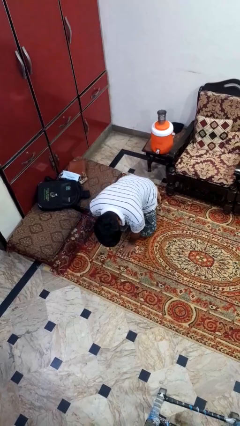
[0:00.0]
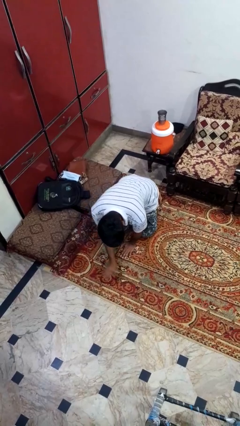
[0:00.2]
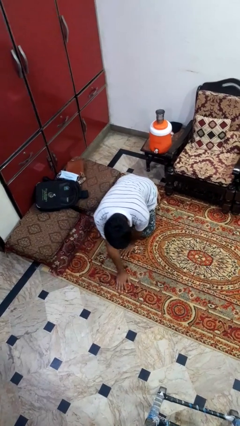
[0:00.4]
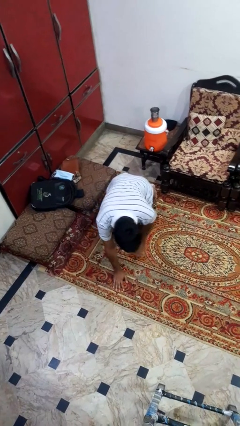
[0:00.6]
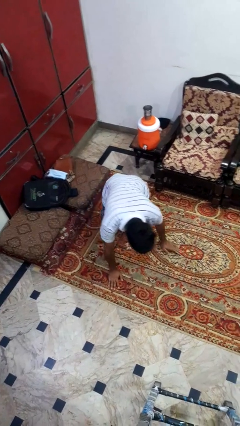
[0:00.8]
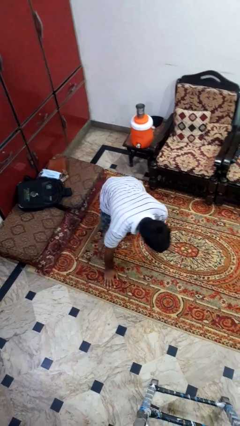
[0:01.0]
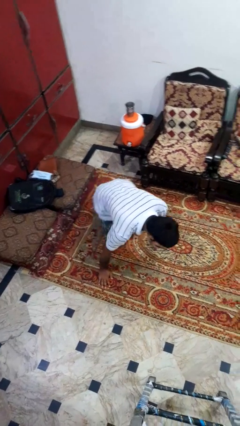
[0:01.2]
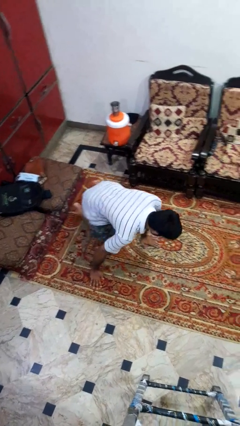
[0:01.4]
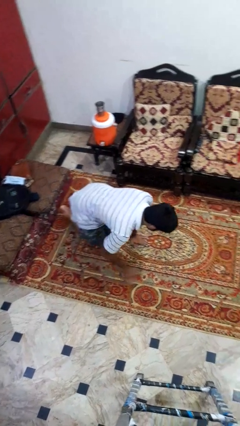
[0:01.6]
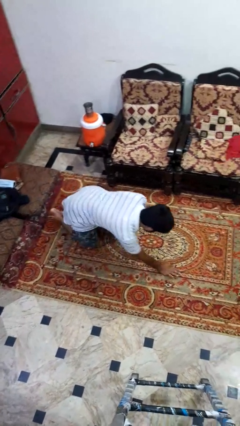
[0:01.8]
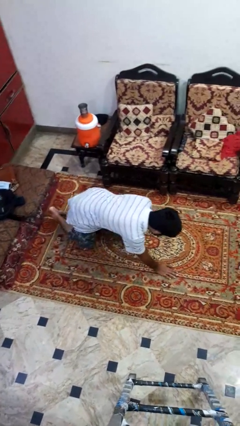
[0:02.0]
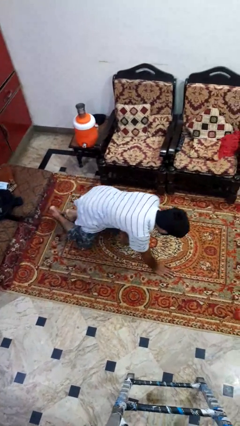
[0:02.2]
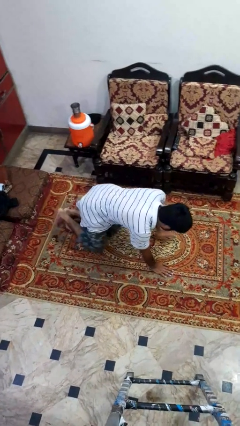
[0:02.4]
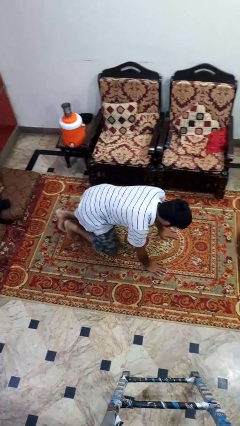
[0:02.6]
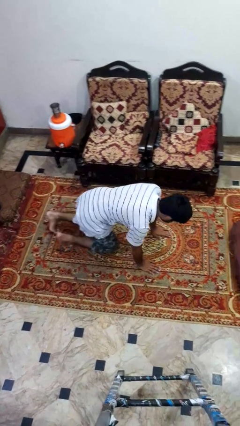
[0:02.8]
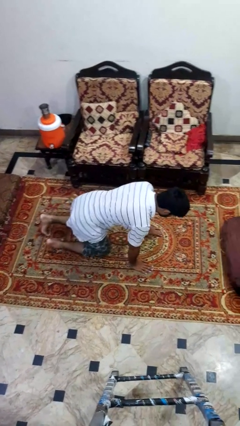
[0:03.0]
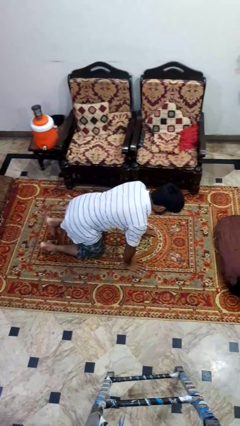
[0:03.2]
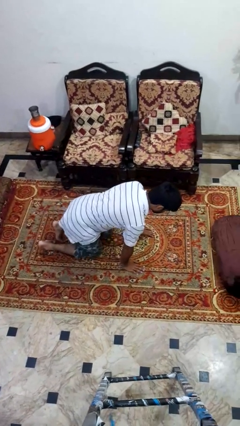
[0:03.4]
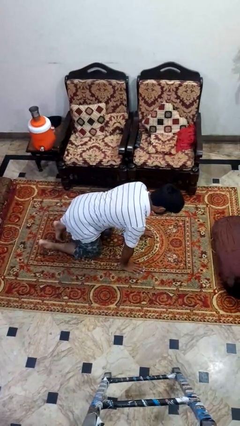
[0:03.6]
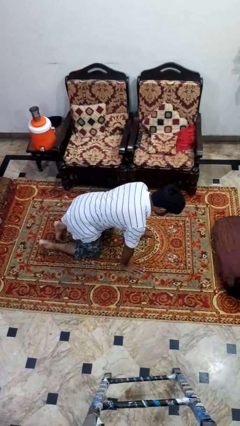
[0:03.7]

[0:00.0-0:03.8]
person crawls

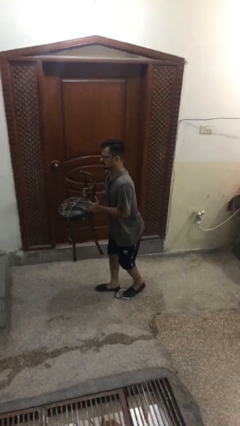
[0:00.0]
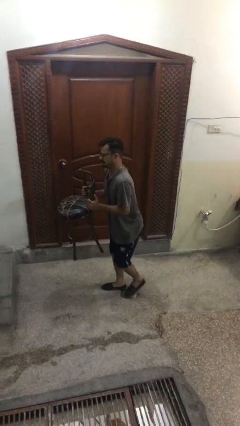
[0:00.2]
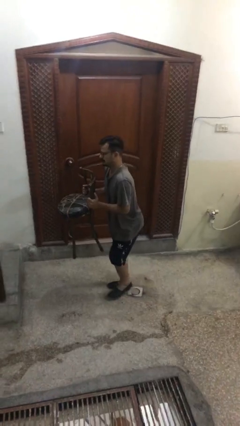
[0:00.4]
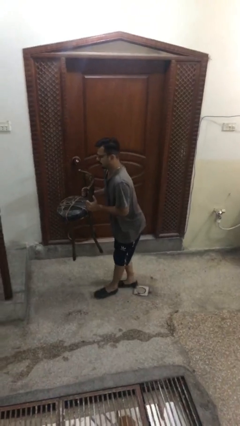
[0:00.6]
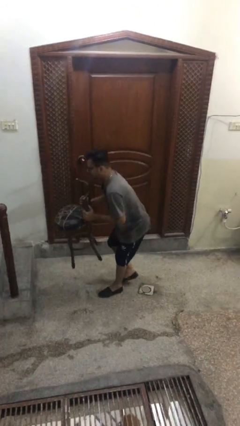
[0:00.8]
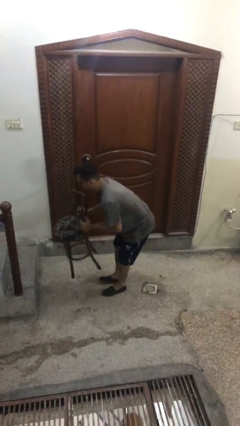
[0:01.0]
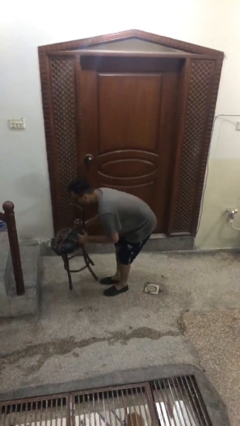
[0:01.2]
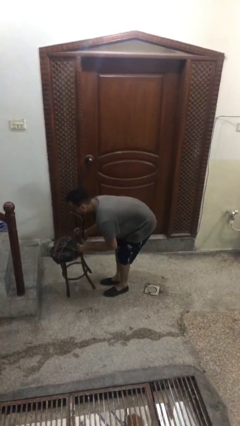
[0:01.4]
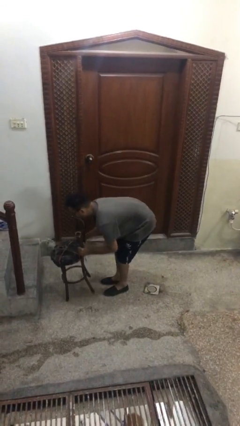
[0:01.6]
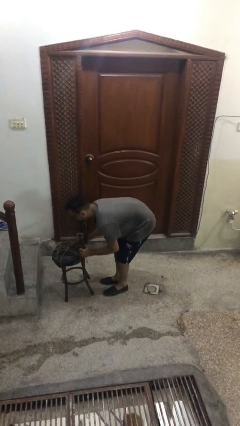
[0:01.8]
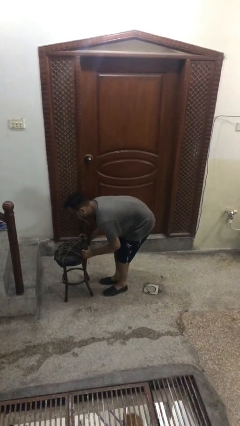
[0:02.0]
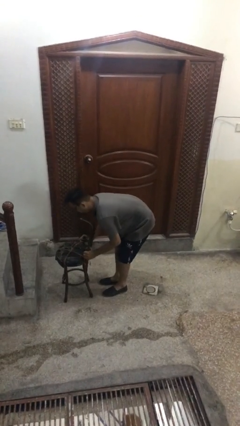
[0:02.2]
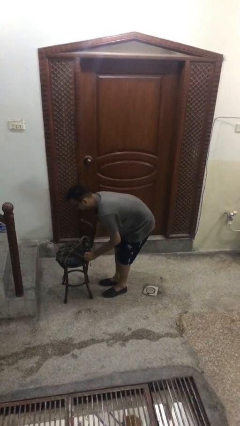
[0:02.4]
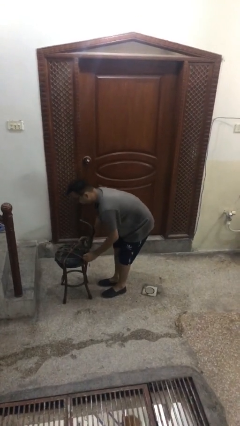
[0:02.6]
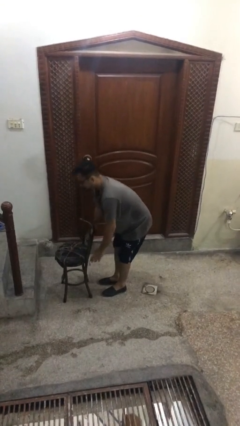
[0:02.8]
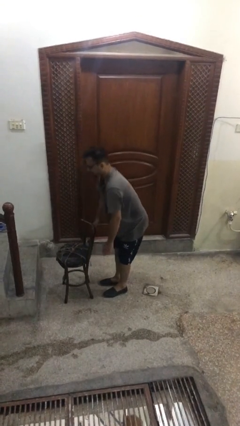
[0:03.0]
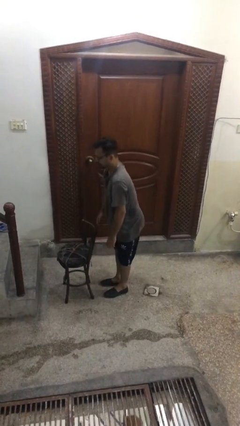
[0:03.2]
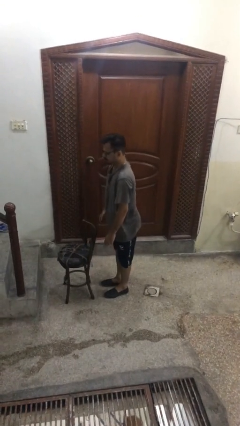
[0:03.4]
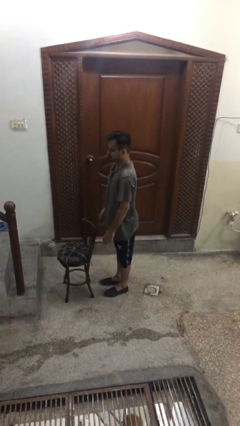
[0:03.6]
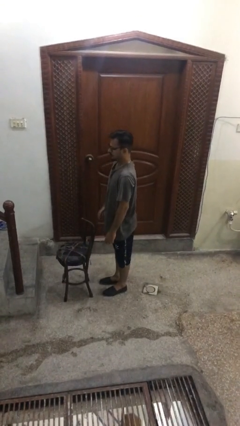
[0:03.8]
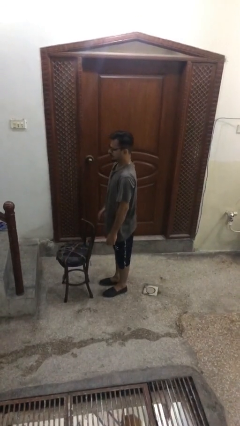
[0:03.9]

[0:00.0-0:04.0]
person puts down object on floor

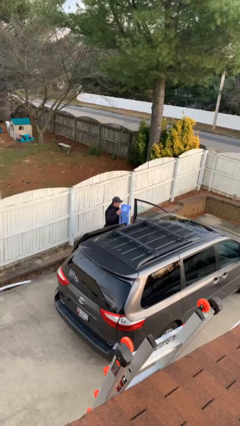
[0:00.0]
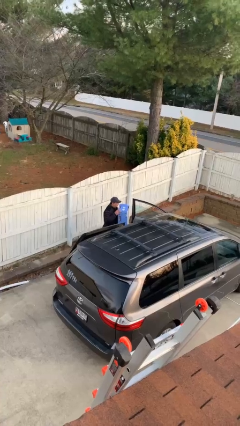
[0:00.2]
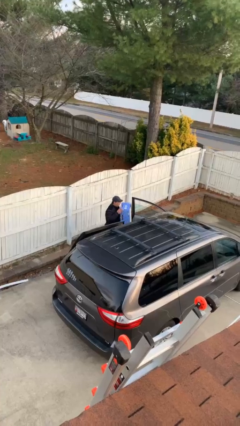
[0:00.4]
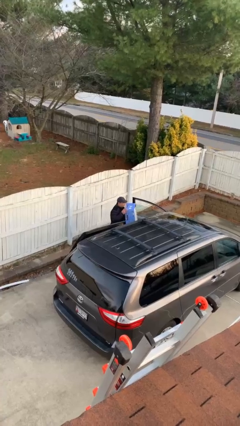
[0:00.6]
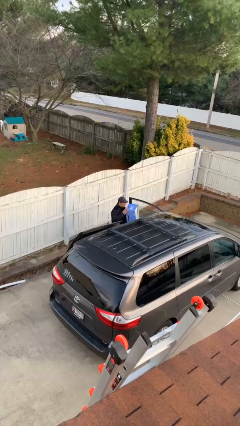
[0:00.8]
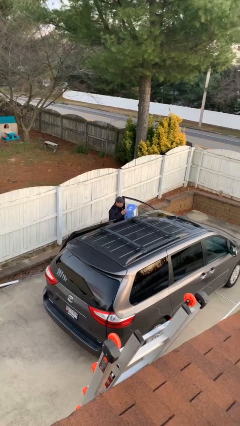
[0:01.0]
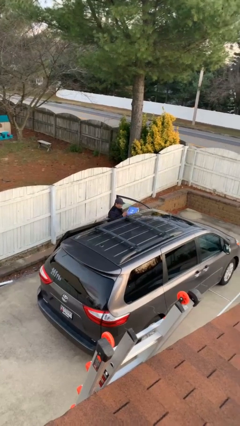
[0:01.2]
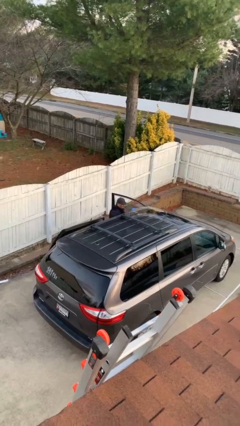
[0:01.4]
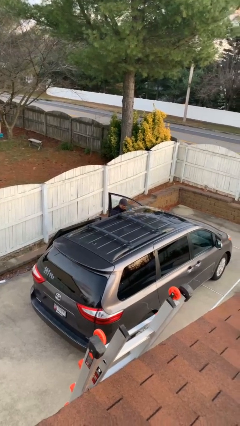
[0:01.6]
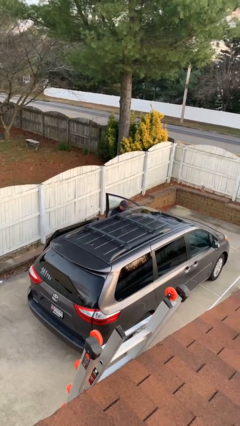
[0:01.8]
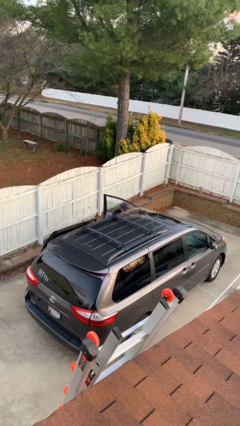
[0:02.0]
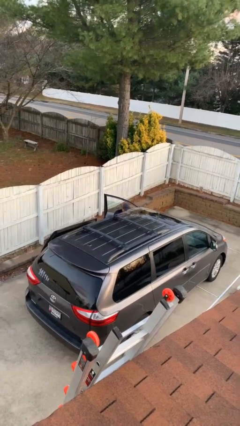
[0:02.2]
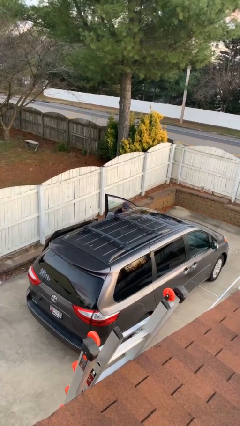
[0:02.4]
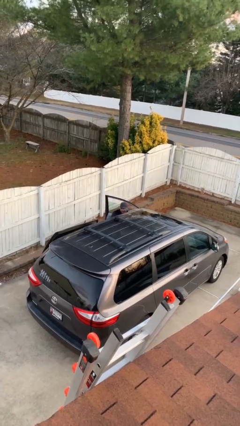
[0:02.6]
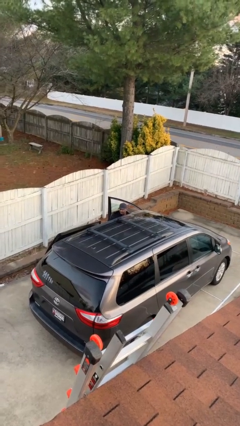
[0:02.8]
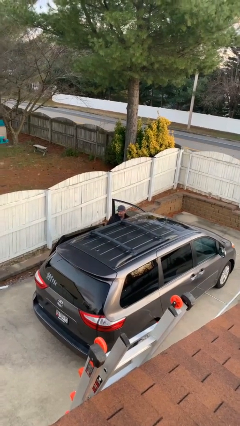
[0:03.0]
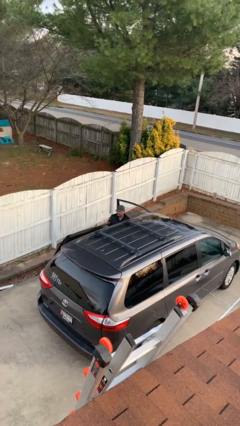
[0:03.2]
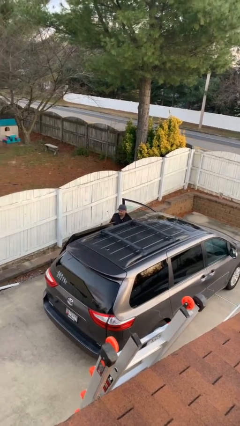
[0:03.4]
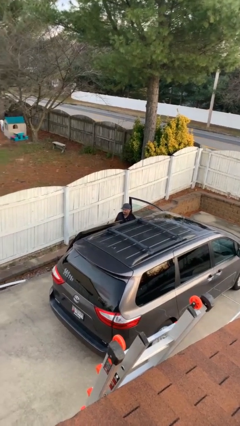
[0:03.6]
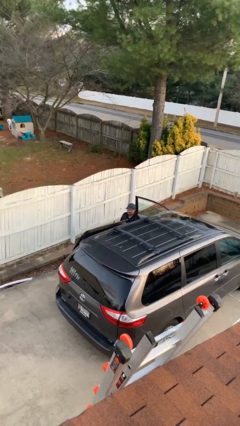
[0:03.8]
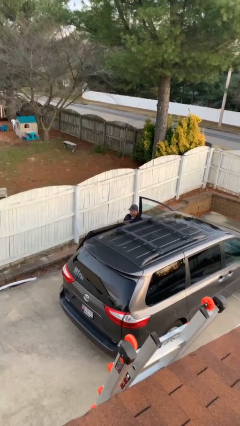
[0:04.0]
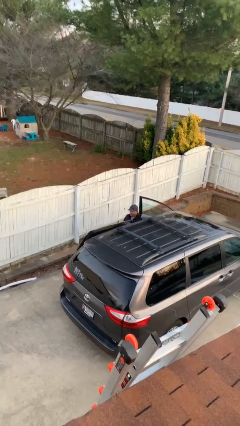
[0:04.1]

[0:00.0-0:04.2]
person loads car

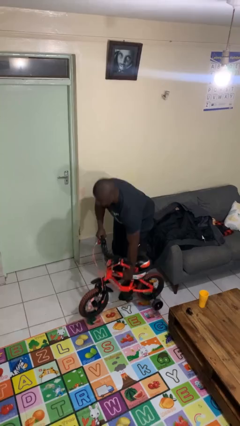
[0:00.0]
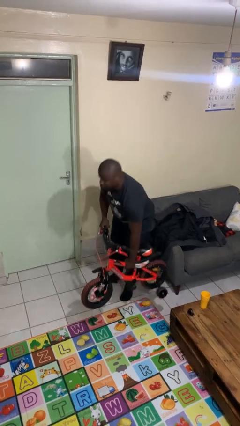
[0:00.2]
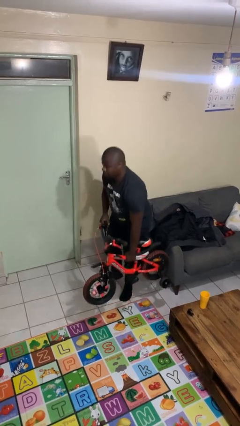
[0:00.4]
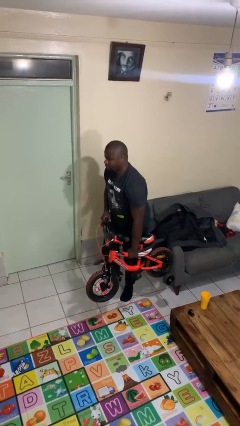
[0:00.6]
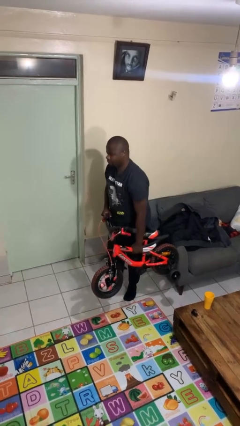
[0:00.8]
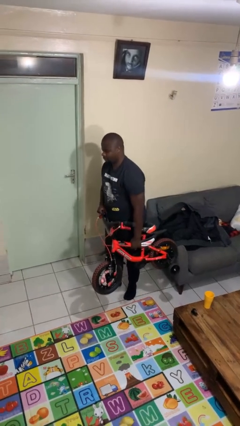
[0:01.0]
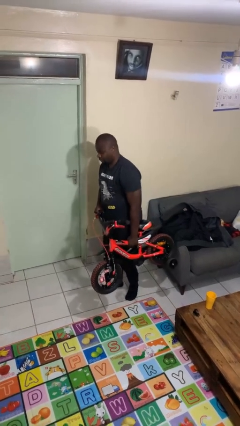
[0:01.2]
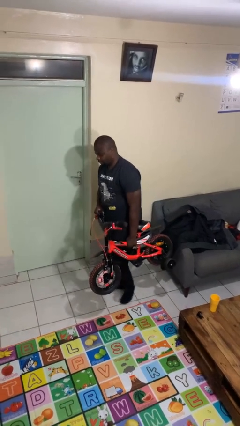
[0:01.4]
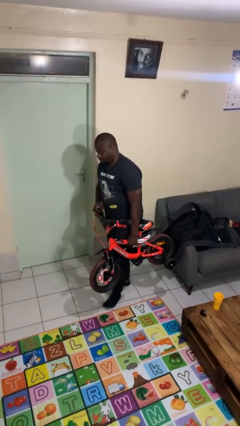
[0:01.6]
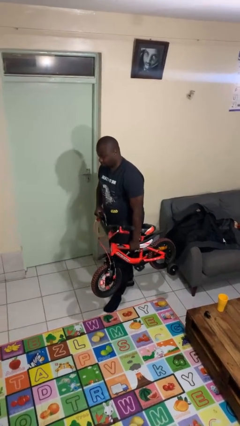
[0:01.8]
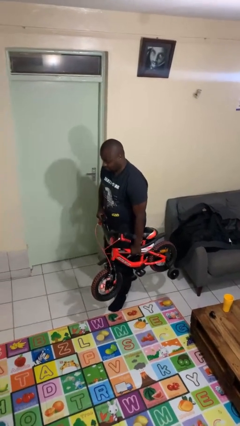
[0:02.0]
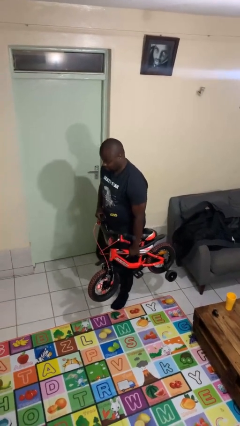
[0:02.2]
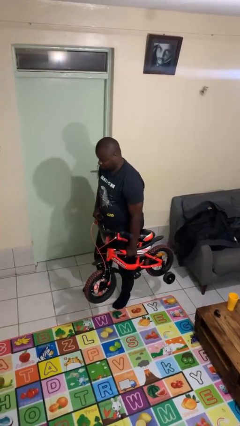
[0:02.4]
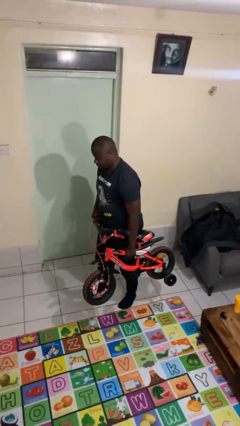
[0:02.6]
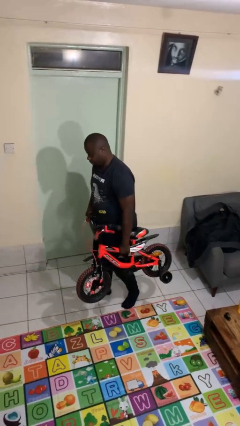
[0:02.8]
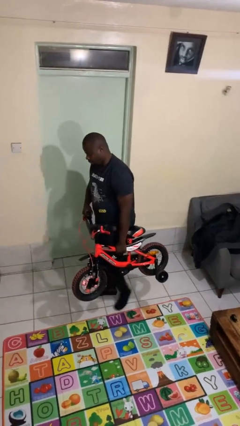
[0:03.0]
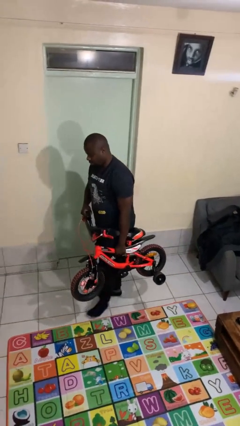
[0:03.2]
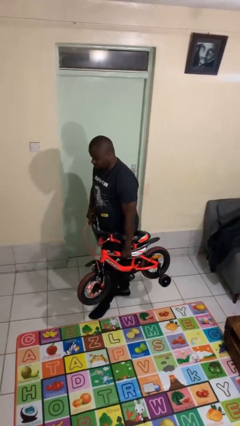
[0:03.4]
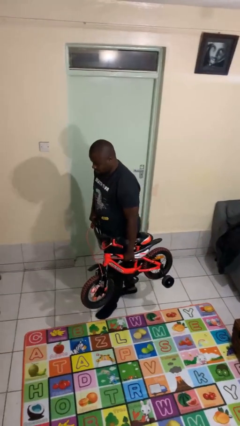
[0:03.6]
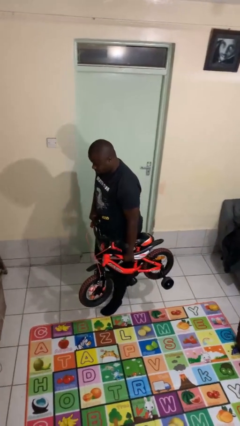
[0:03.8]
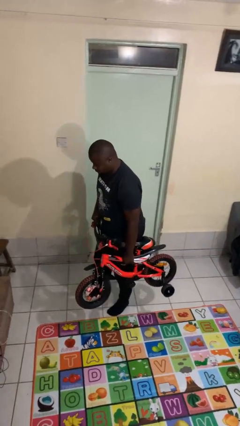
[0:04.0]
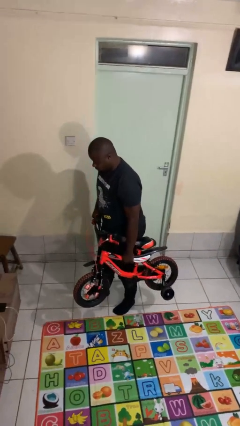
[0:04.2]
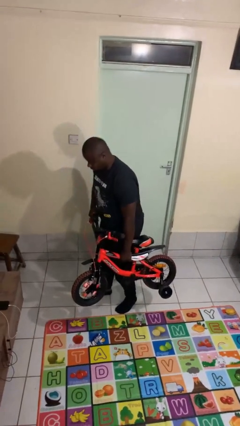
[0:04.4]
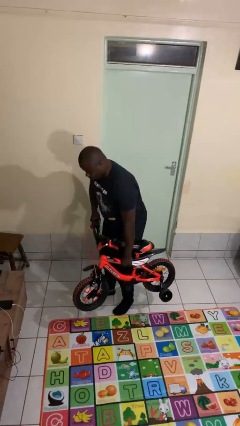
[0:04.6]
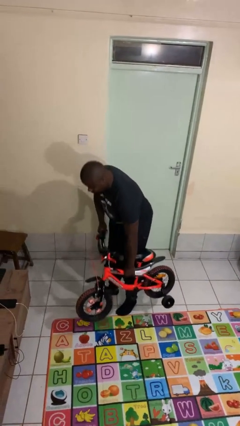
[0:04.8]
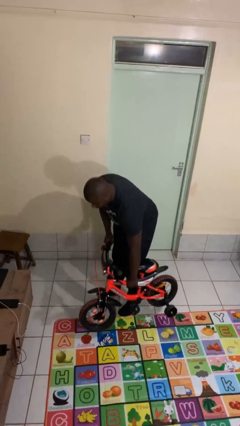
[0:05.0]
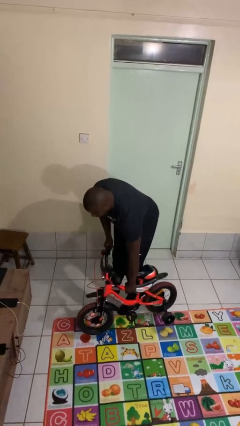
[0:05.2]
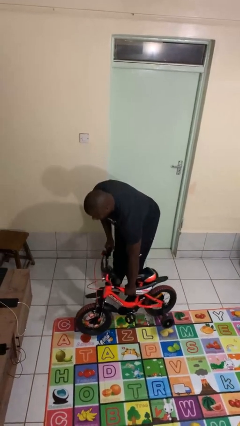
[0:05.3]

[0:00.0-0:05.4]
person carries bicycle

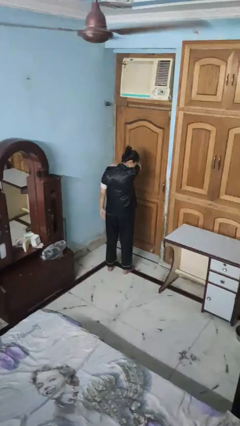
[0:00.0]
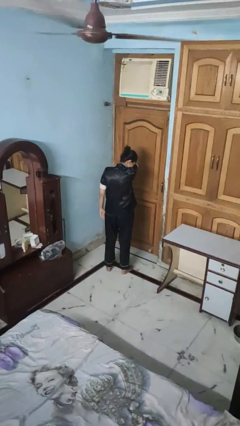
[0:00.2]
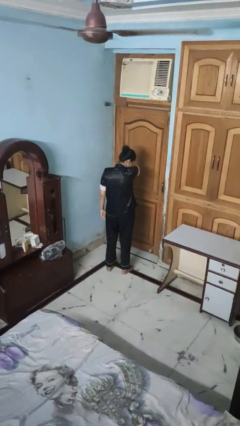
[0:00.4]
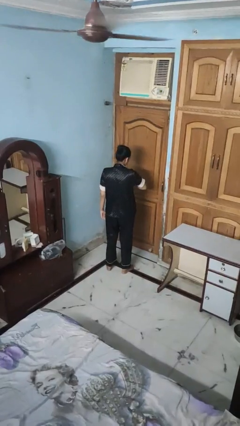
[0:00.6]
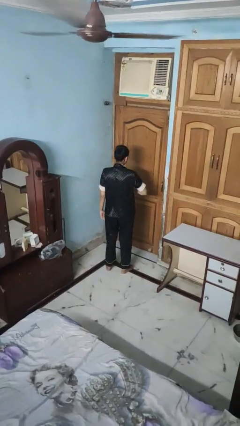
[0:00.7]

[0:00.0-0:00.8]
person sneezes into arm
